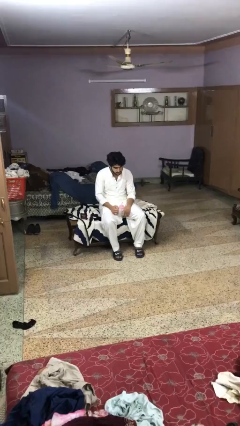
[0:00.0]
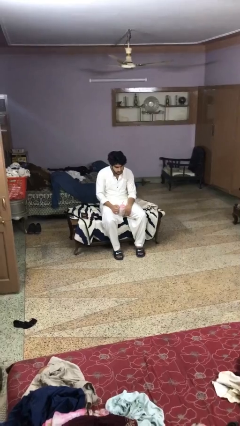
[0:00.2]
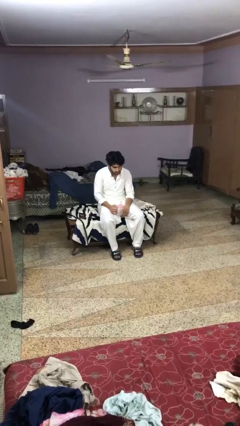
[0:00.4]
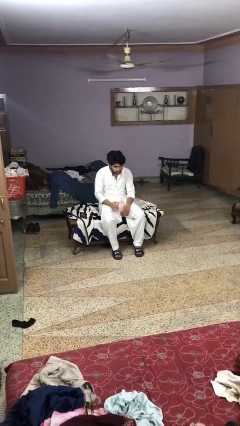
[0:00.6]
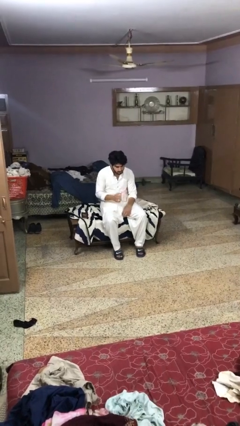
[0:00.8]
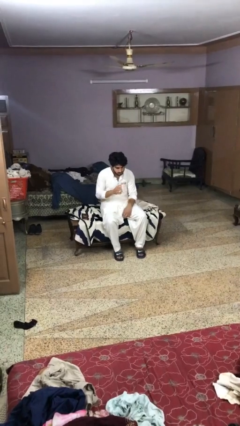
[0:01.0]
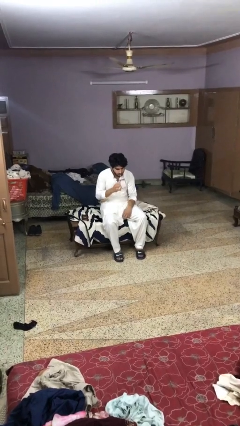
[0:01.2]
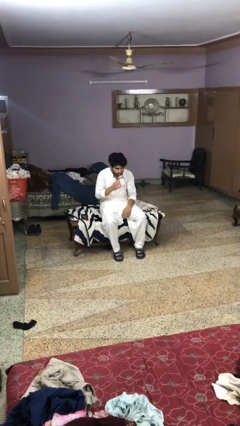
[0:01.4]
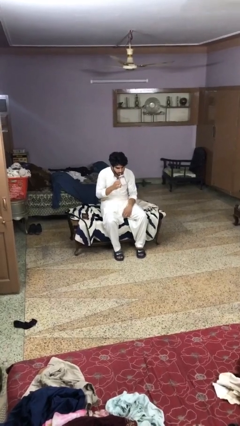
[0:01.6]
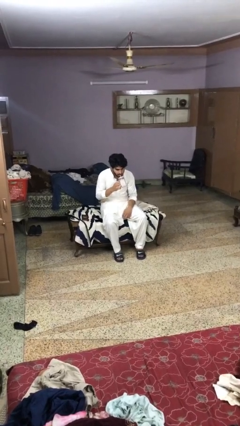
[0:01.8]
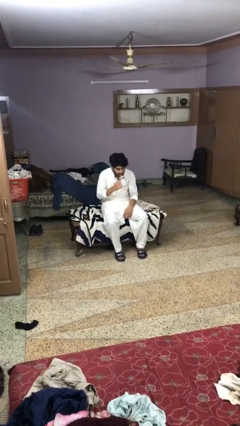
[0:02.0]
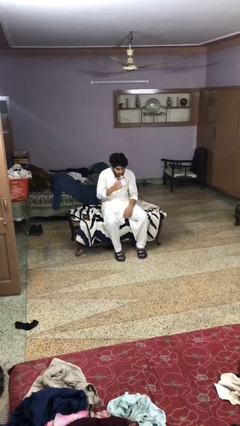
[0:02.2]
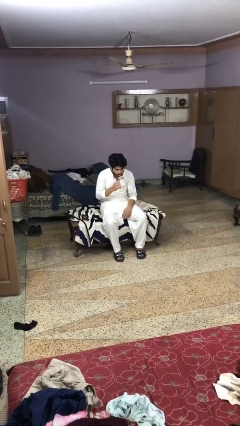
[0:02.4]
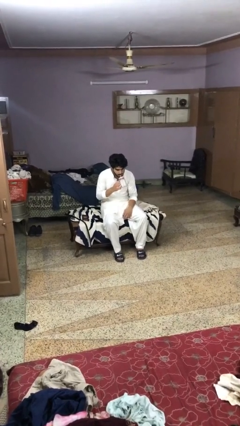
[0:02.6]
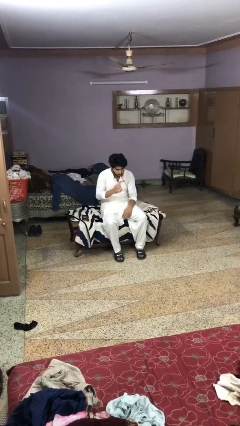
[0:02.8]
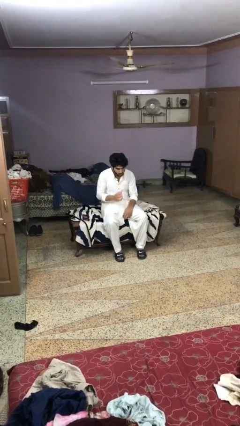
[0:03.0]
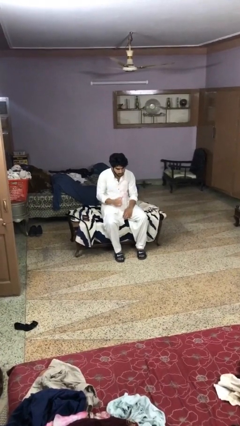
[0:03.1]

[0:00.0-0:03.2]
person drinks from straw

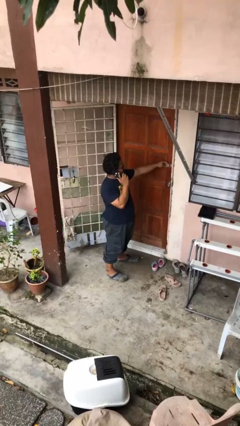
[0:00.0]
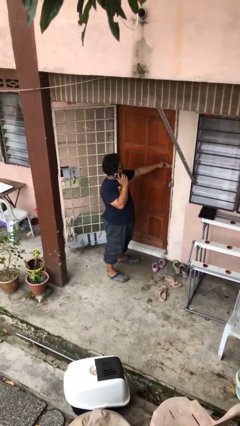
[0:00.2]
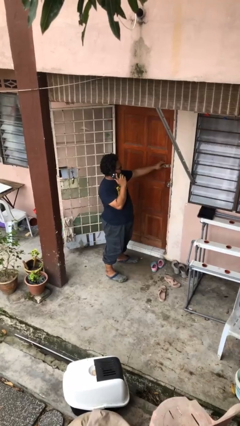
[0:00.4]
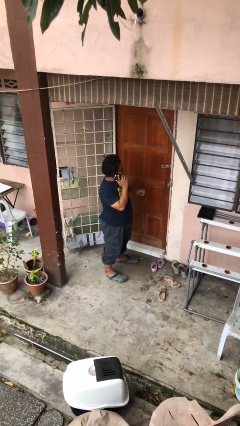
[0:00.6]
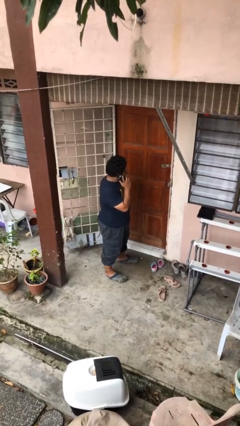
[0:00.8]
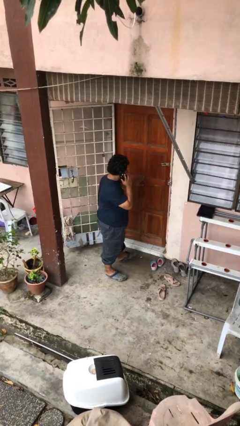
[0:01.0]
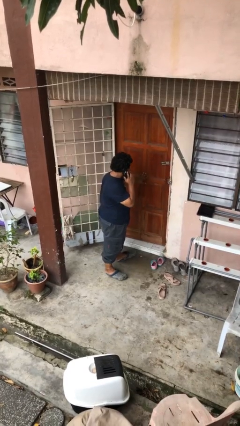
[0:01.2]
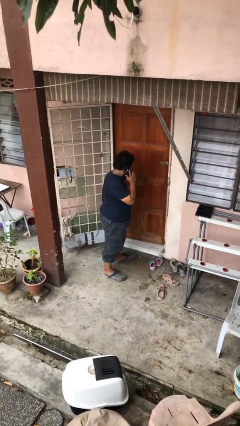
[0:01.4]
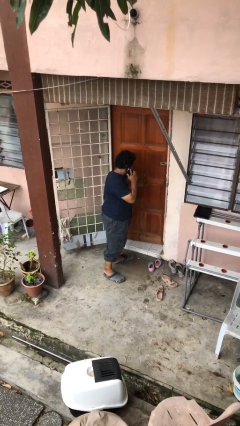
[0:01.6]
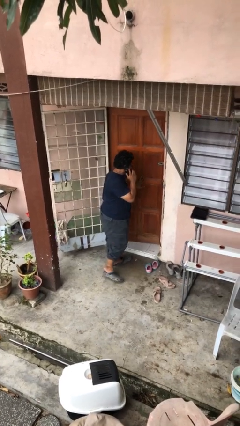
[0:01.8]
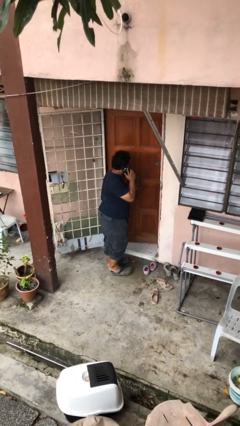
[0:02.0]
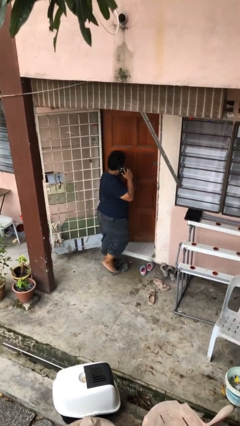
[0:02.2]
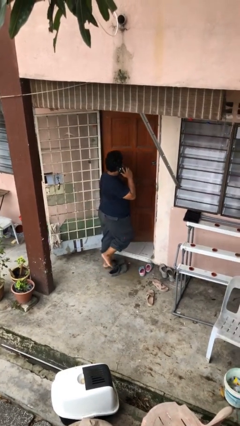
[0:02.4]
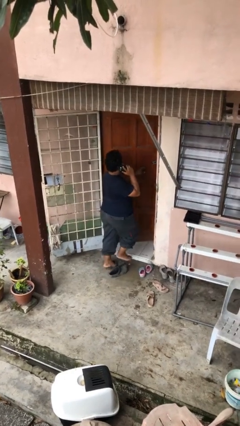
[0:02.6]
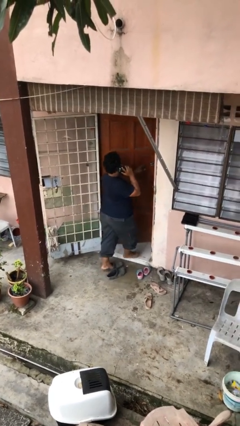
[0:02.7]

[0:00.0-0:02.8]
person opens facility door

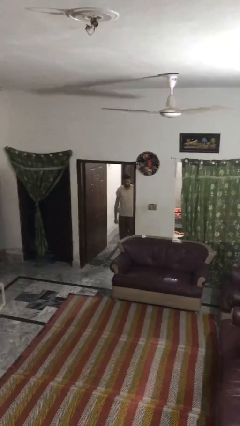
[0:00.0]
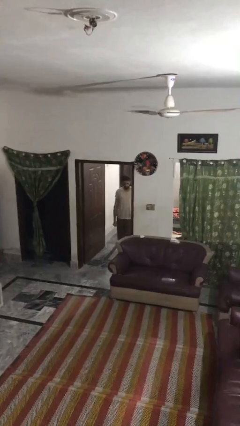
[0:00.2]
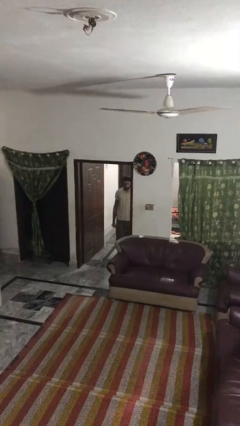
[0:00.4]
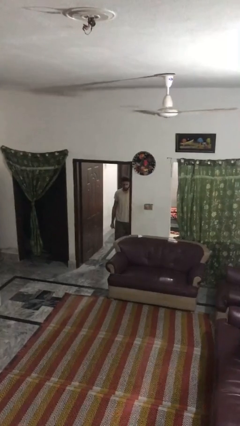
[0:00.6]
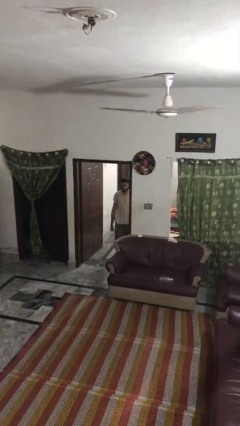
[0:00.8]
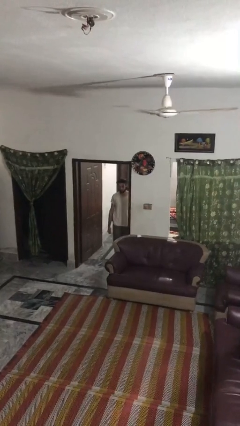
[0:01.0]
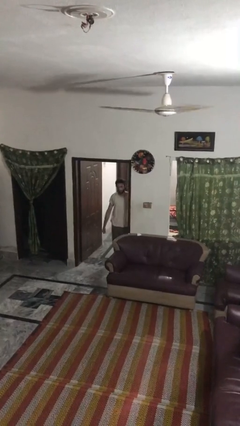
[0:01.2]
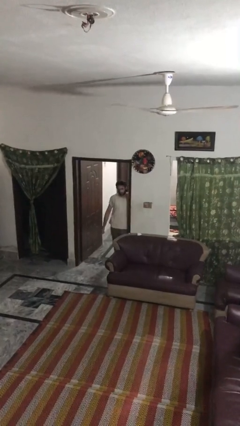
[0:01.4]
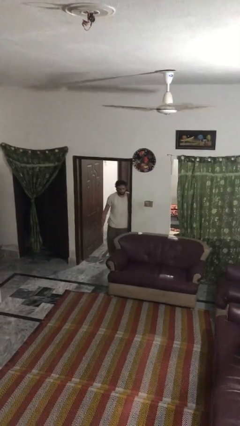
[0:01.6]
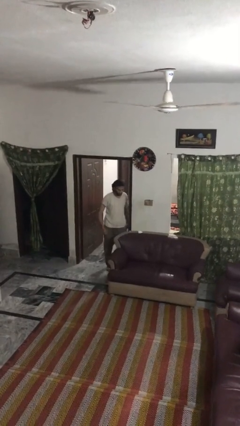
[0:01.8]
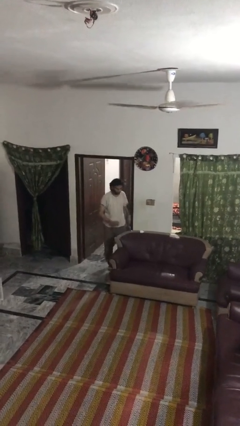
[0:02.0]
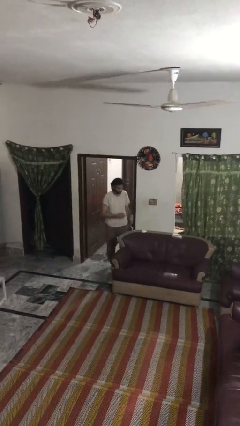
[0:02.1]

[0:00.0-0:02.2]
person bumps into wall

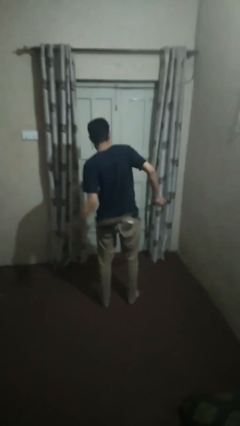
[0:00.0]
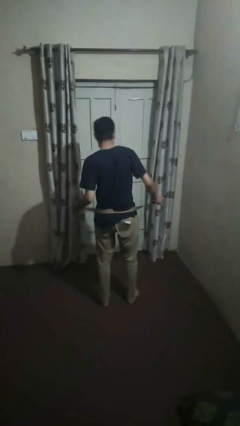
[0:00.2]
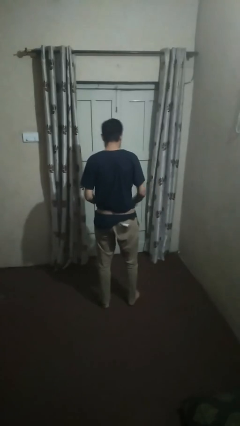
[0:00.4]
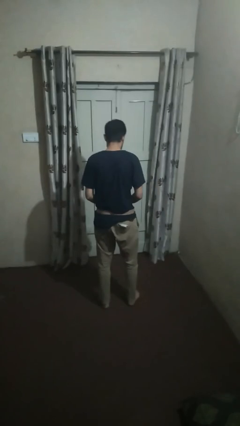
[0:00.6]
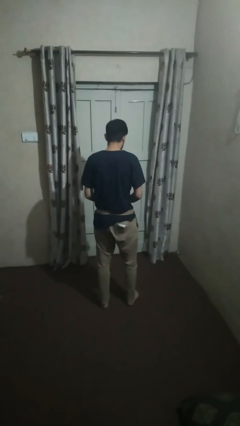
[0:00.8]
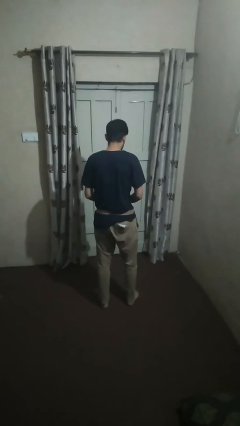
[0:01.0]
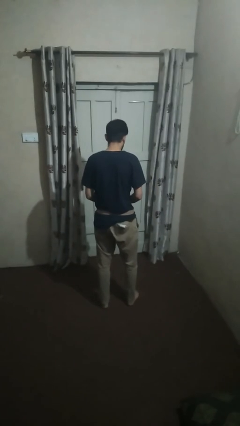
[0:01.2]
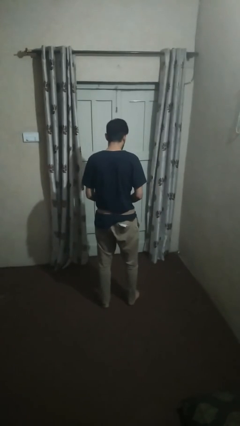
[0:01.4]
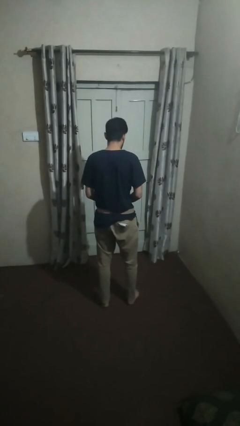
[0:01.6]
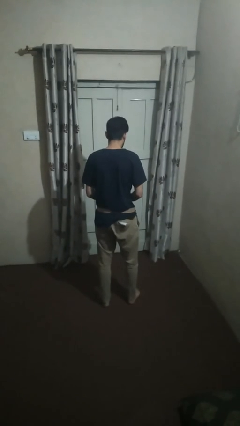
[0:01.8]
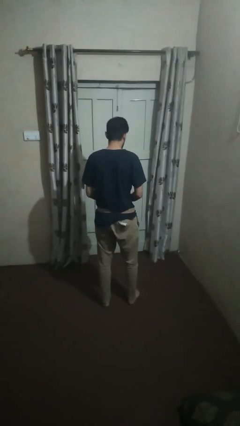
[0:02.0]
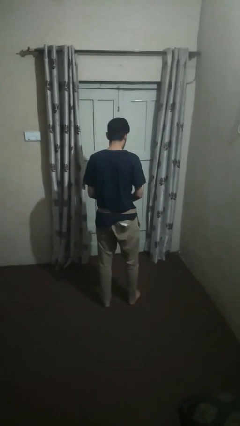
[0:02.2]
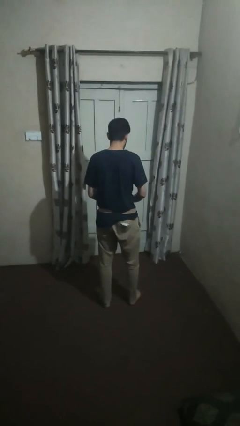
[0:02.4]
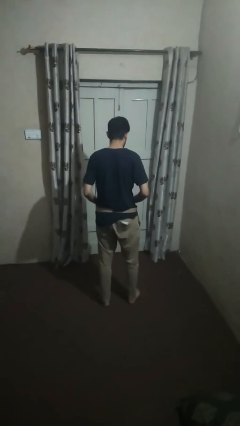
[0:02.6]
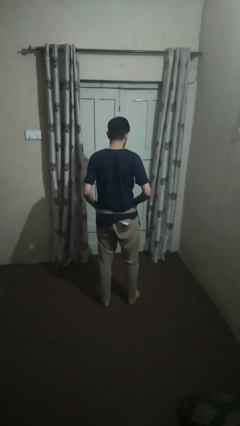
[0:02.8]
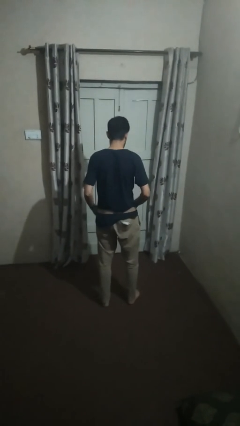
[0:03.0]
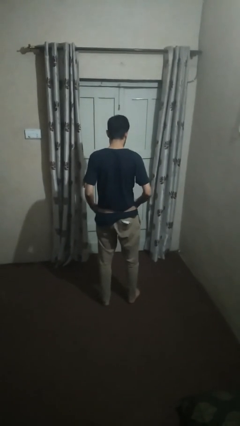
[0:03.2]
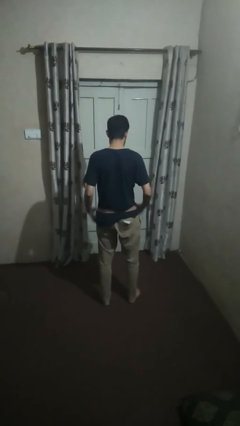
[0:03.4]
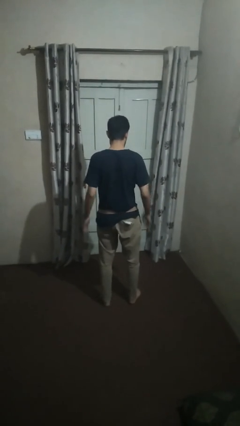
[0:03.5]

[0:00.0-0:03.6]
person puts on belt

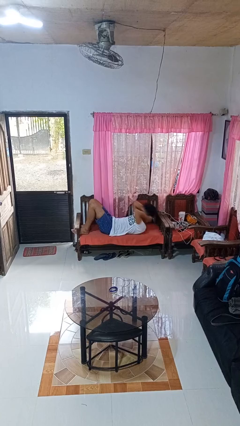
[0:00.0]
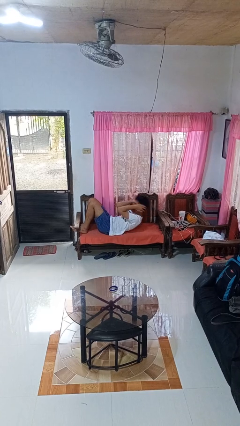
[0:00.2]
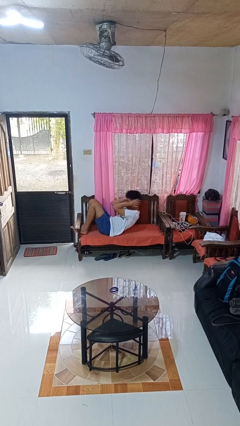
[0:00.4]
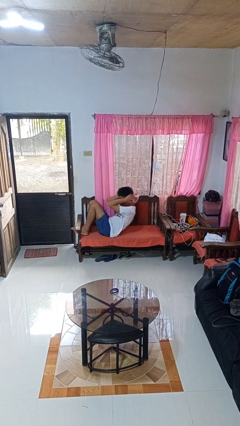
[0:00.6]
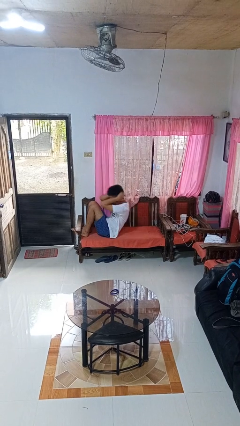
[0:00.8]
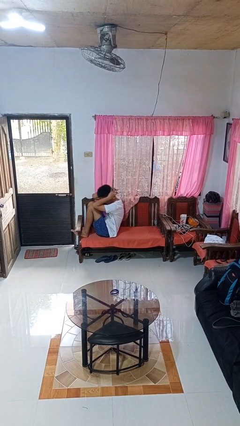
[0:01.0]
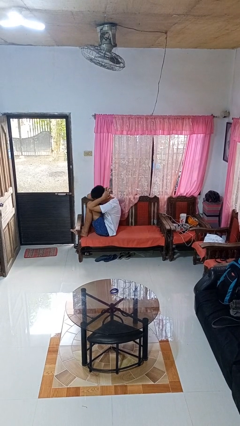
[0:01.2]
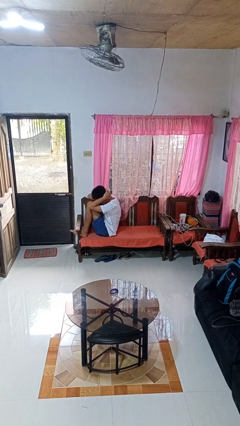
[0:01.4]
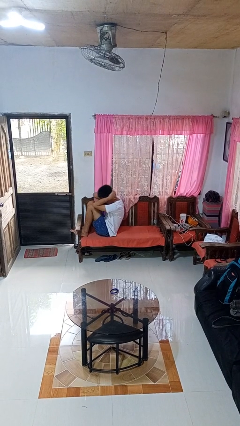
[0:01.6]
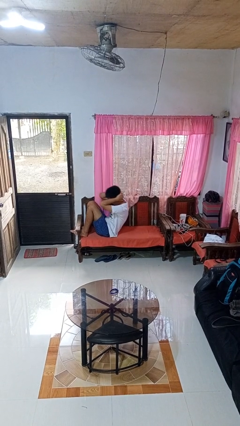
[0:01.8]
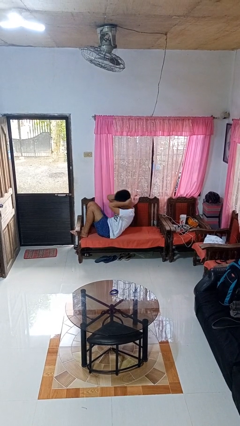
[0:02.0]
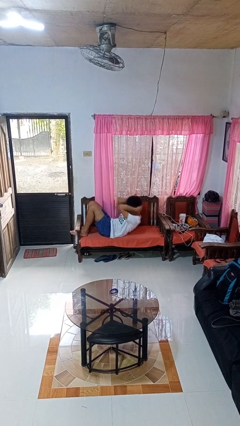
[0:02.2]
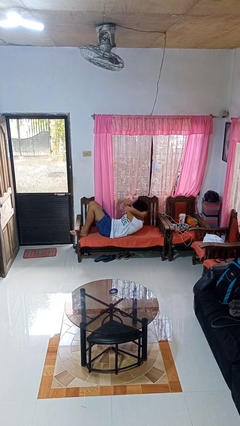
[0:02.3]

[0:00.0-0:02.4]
person exercises with situp

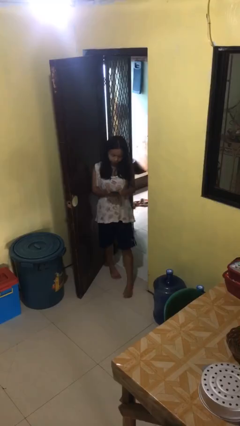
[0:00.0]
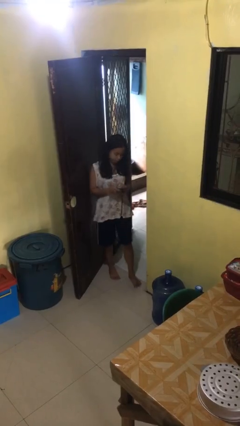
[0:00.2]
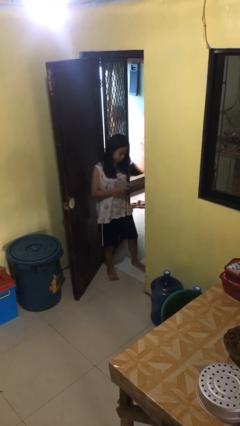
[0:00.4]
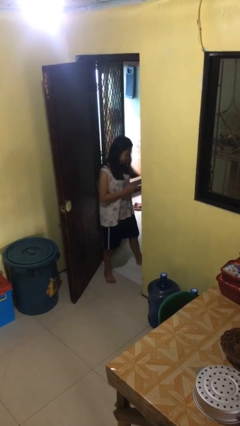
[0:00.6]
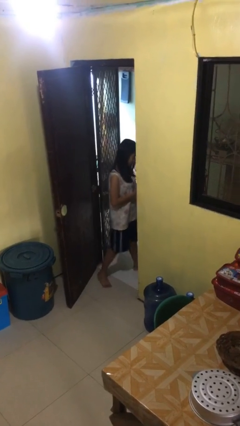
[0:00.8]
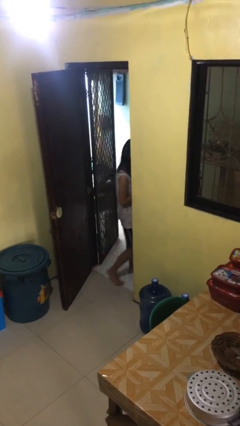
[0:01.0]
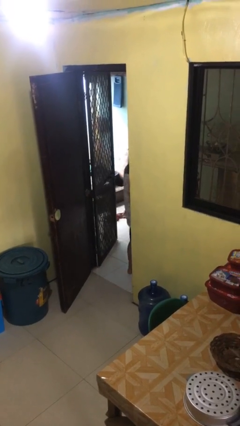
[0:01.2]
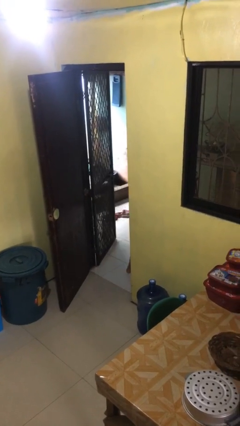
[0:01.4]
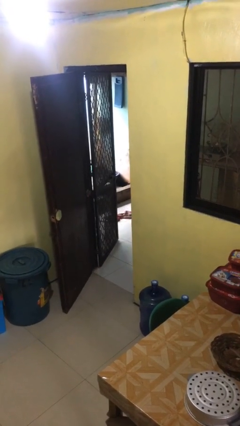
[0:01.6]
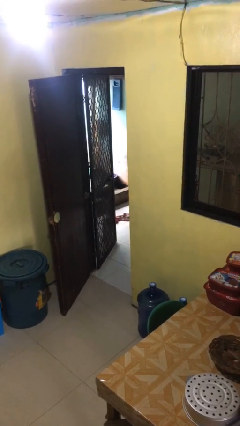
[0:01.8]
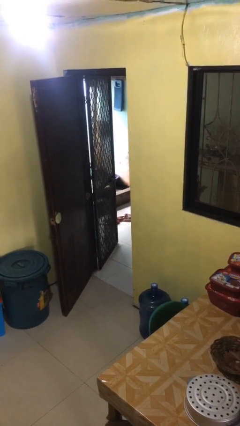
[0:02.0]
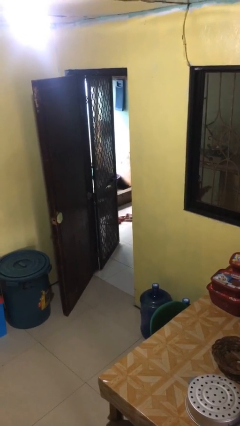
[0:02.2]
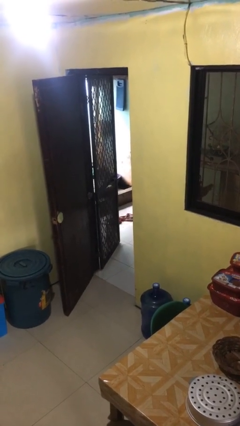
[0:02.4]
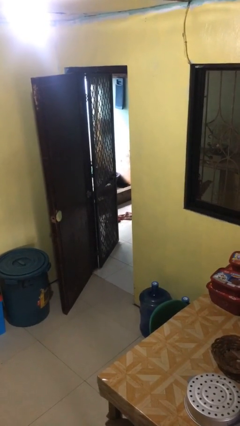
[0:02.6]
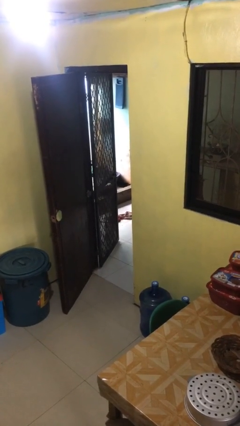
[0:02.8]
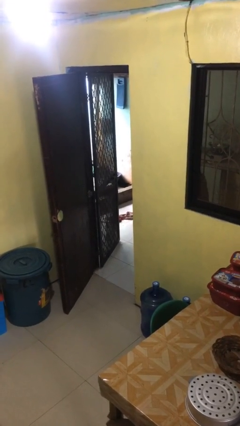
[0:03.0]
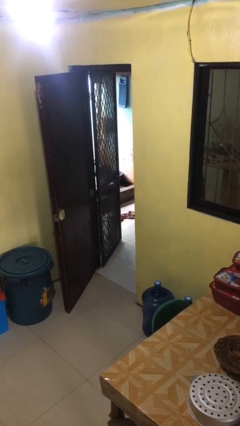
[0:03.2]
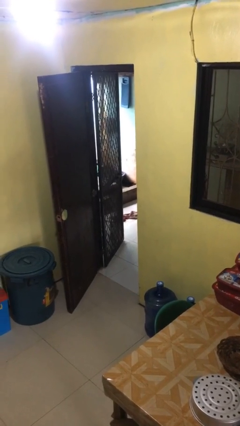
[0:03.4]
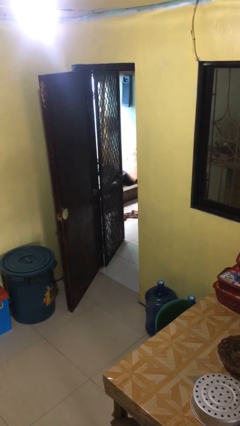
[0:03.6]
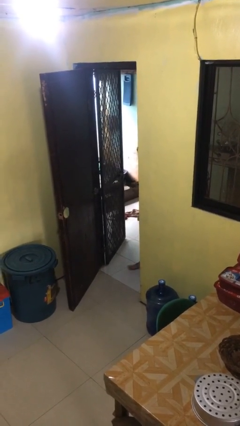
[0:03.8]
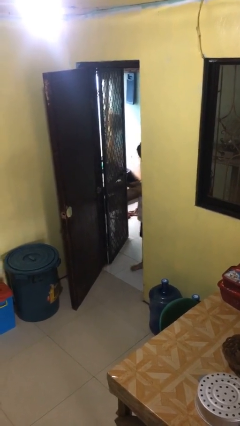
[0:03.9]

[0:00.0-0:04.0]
person exits scene through structure
